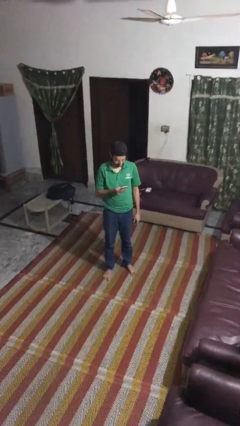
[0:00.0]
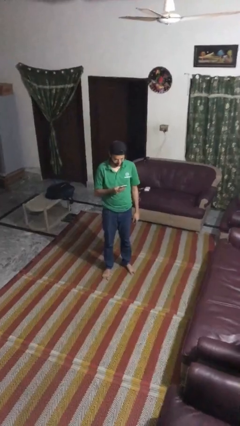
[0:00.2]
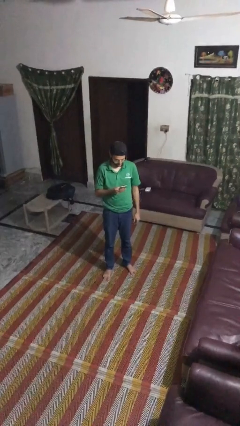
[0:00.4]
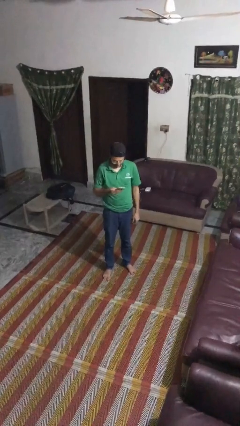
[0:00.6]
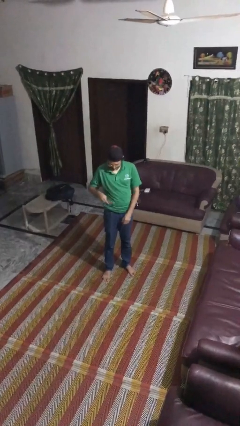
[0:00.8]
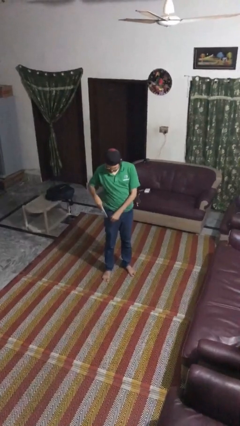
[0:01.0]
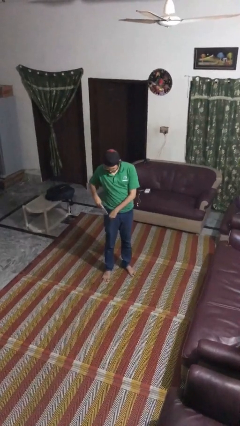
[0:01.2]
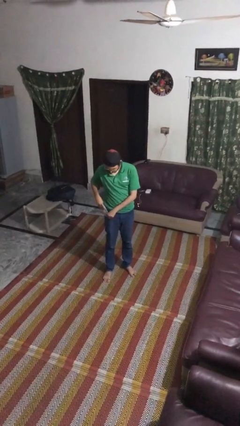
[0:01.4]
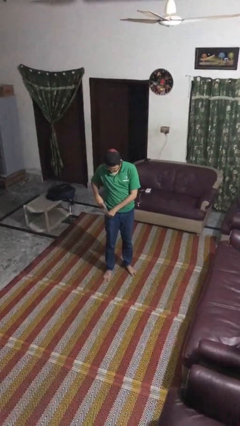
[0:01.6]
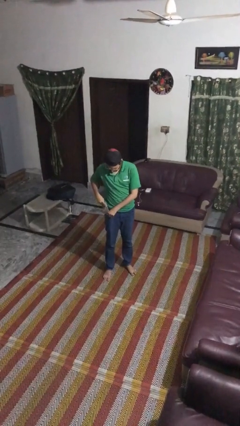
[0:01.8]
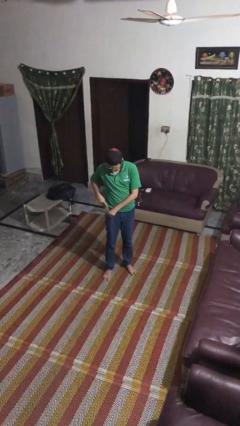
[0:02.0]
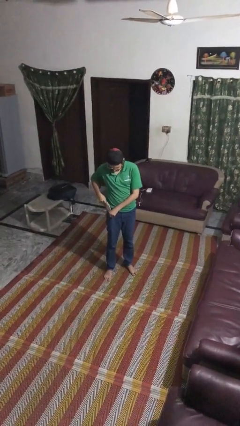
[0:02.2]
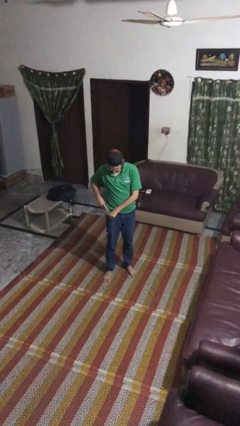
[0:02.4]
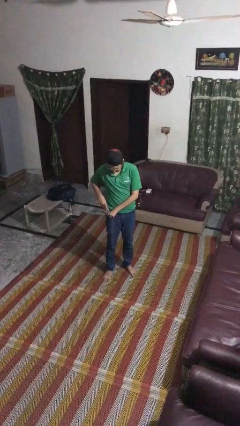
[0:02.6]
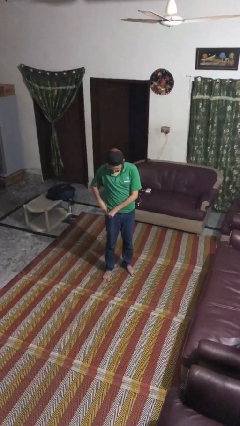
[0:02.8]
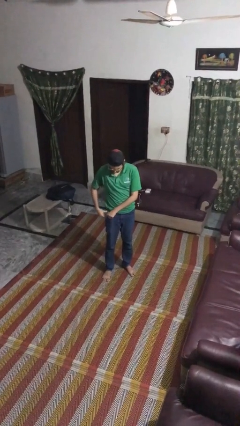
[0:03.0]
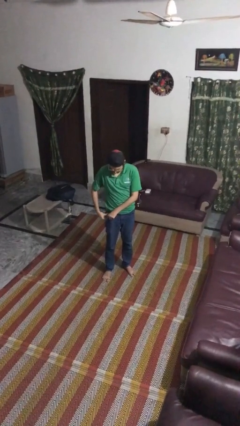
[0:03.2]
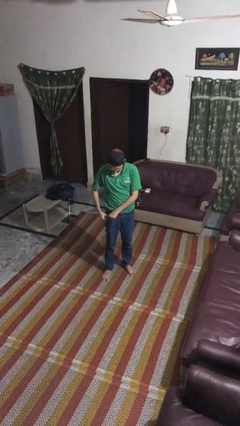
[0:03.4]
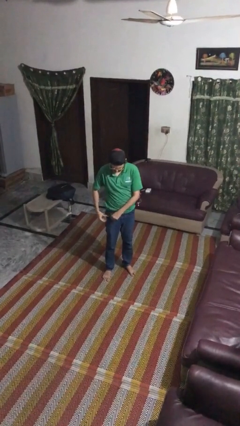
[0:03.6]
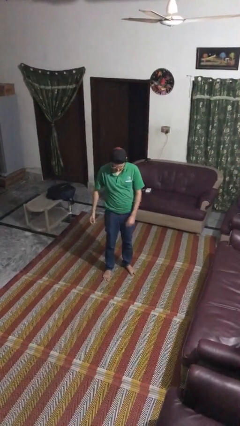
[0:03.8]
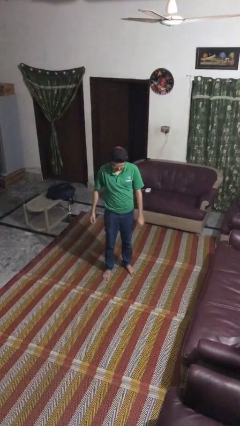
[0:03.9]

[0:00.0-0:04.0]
person puts phone into pocket

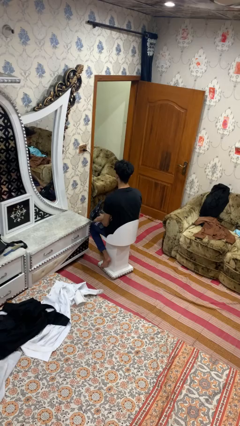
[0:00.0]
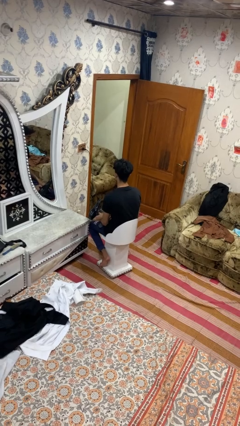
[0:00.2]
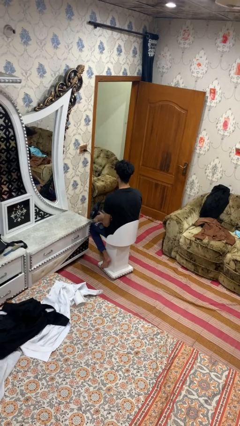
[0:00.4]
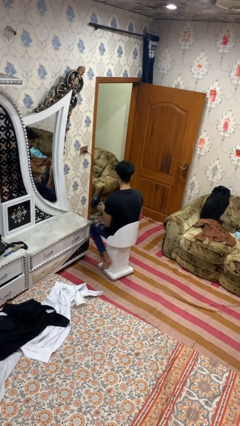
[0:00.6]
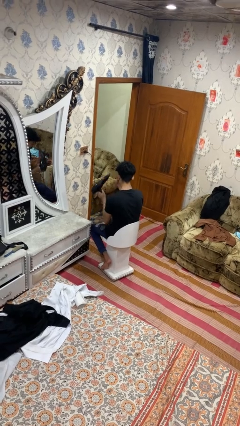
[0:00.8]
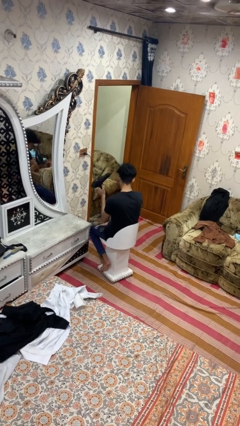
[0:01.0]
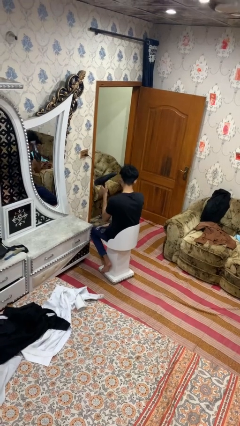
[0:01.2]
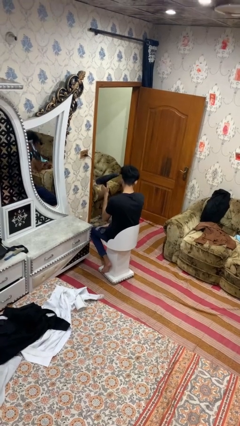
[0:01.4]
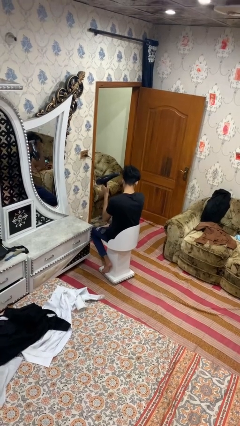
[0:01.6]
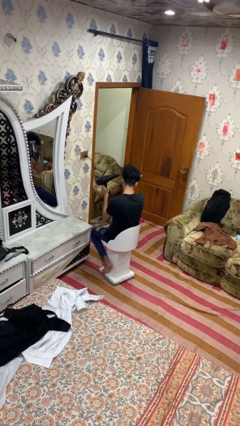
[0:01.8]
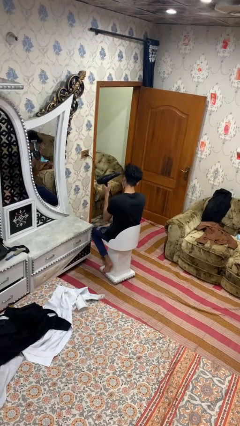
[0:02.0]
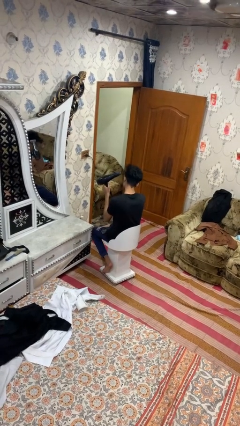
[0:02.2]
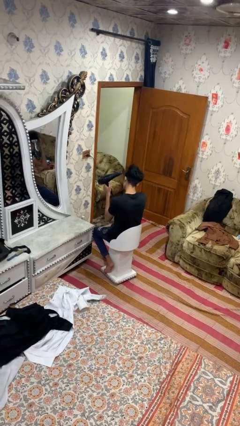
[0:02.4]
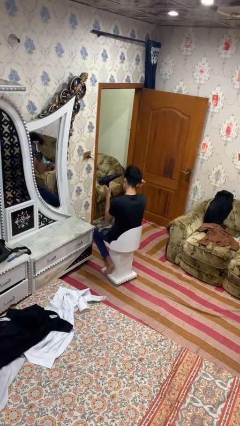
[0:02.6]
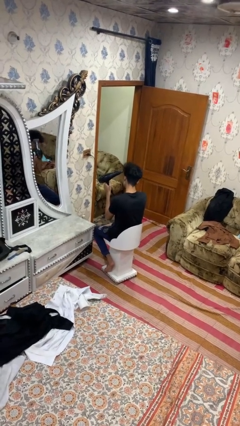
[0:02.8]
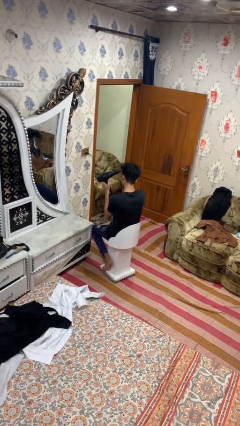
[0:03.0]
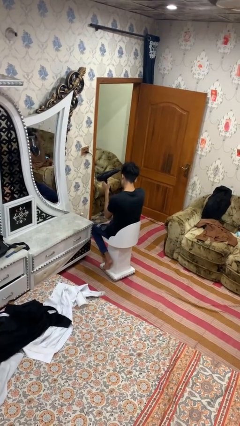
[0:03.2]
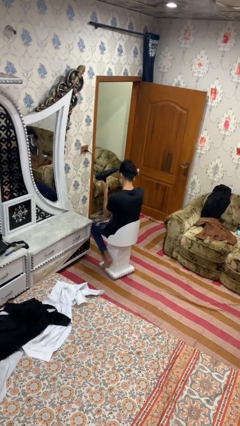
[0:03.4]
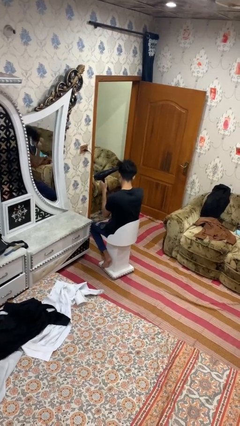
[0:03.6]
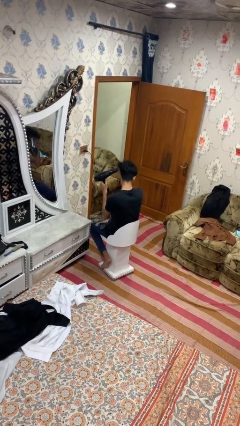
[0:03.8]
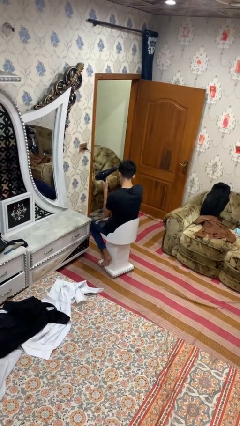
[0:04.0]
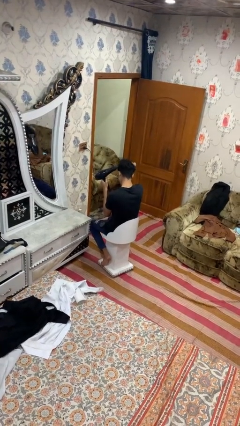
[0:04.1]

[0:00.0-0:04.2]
person dries hair with hairdryer

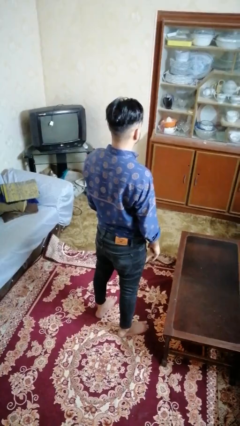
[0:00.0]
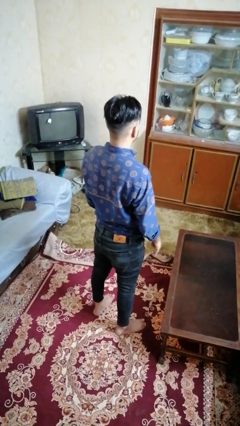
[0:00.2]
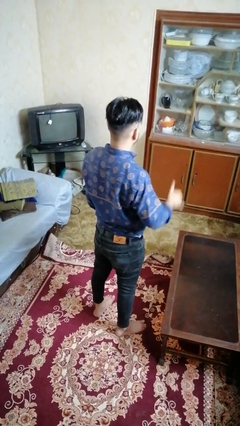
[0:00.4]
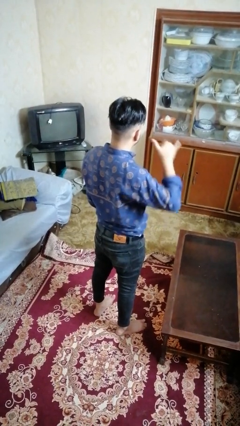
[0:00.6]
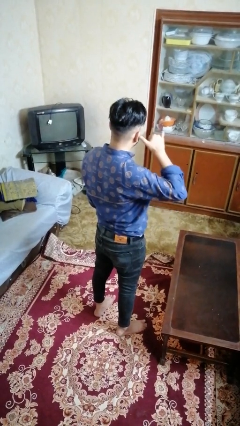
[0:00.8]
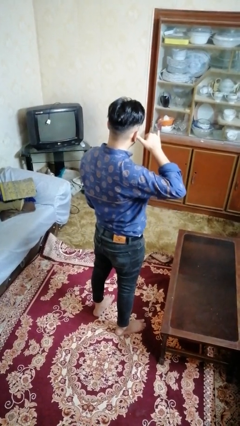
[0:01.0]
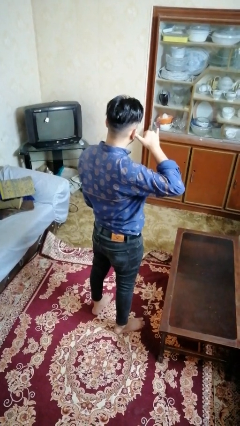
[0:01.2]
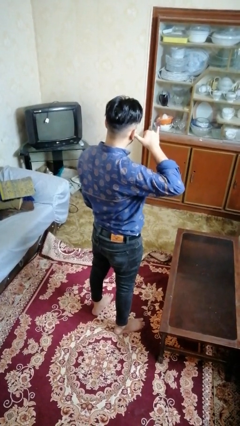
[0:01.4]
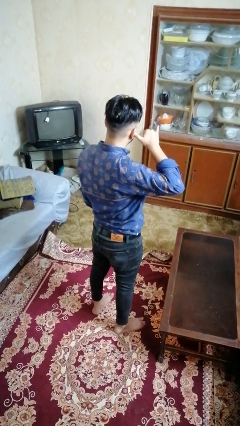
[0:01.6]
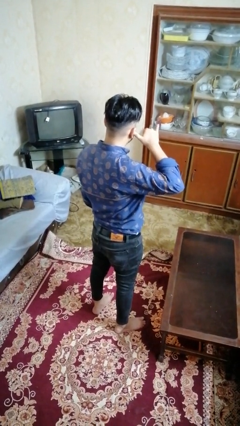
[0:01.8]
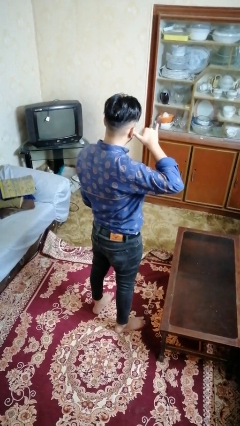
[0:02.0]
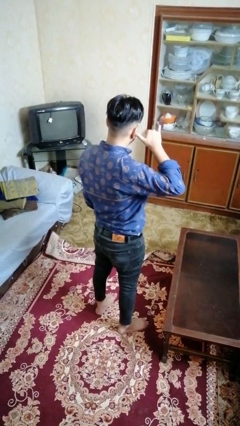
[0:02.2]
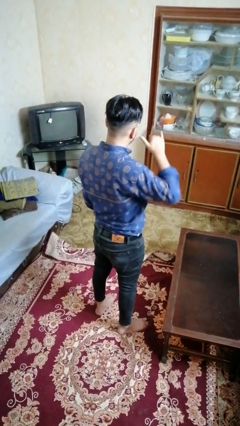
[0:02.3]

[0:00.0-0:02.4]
person gestures call me

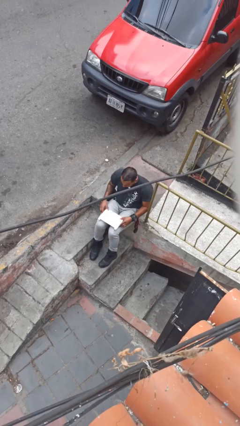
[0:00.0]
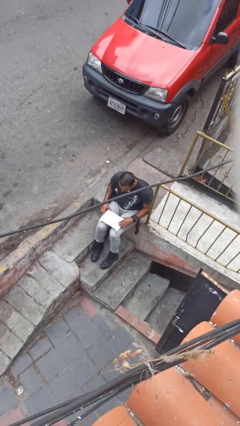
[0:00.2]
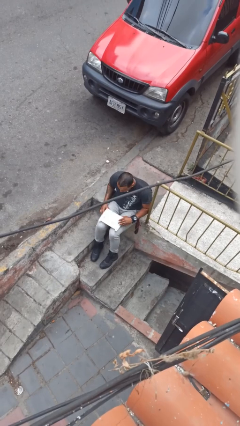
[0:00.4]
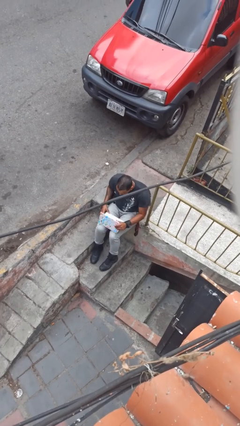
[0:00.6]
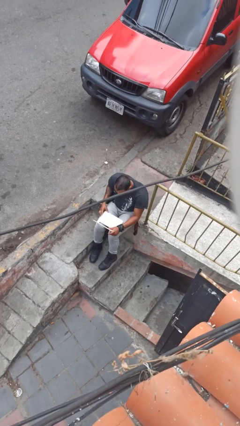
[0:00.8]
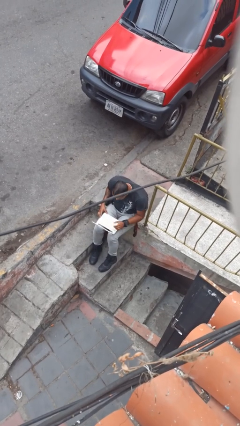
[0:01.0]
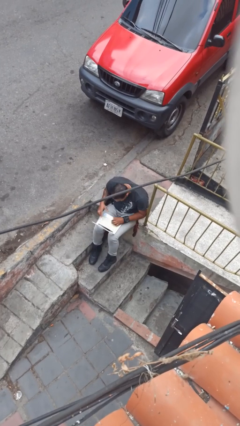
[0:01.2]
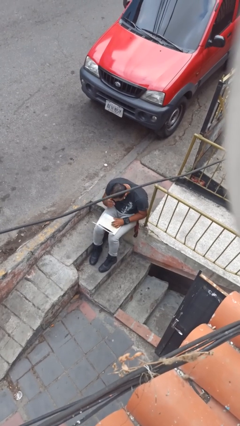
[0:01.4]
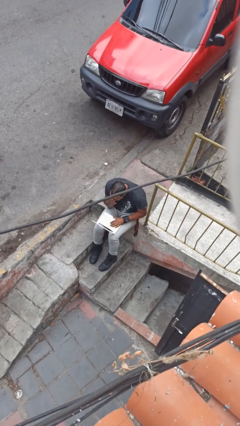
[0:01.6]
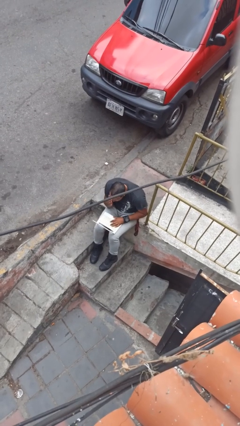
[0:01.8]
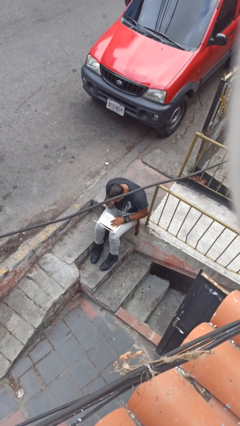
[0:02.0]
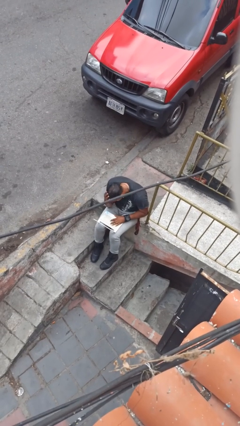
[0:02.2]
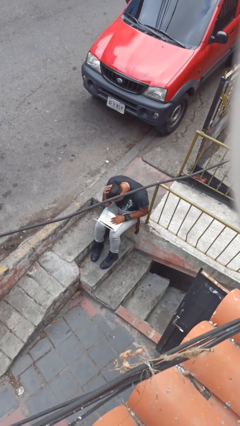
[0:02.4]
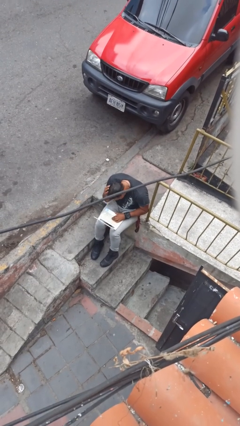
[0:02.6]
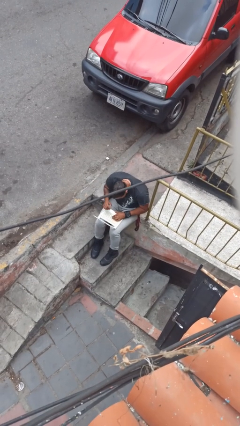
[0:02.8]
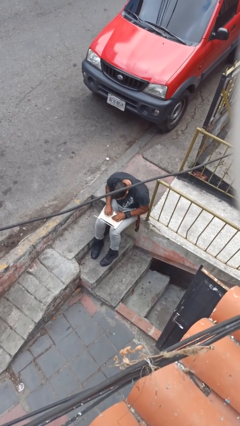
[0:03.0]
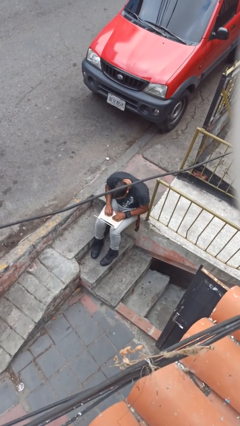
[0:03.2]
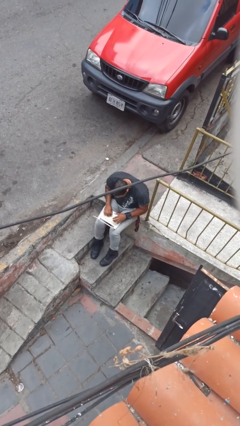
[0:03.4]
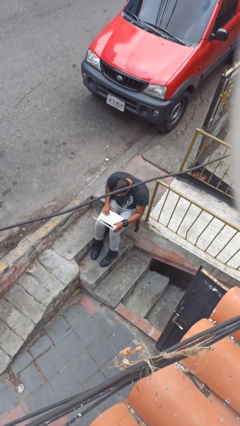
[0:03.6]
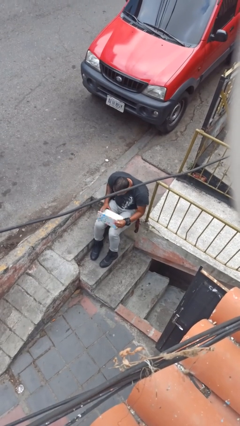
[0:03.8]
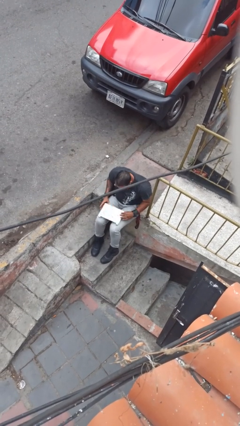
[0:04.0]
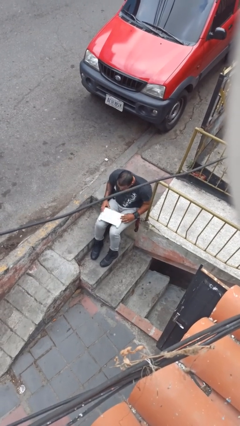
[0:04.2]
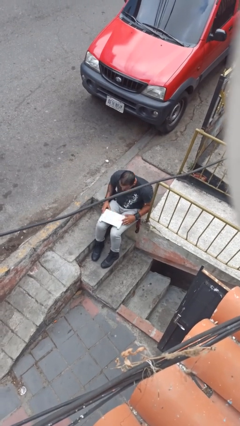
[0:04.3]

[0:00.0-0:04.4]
person interacts with laptop

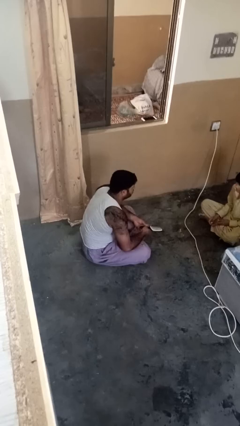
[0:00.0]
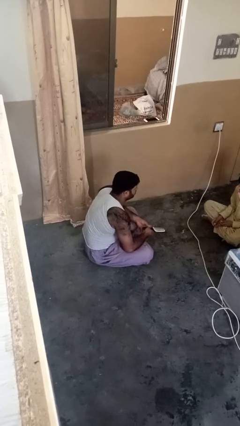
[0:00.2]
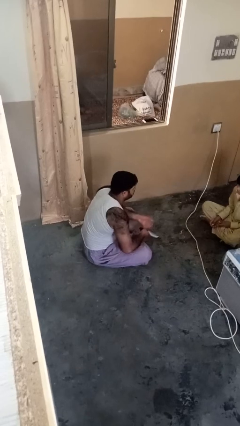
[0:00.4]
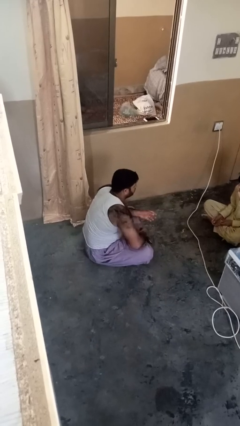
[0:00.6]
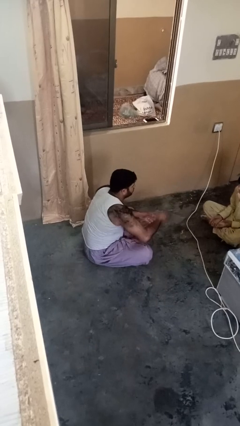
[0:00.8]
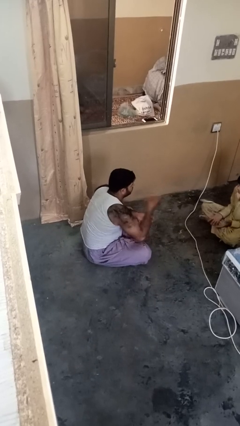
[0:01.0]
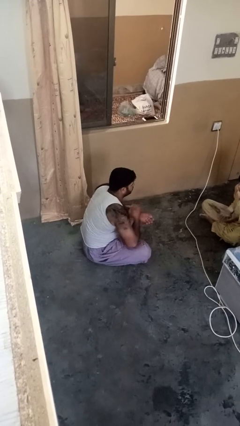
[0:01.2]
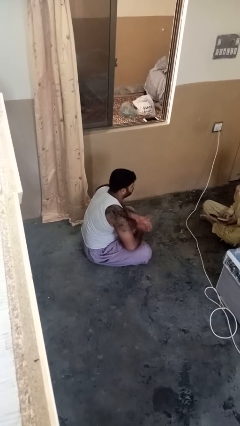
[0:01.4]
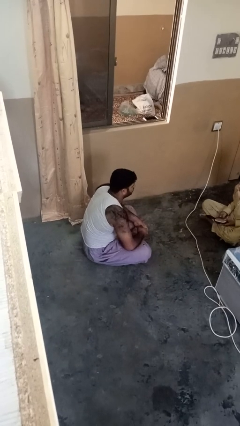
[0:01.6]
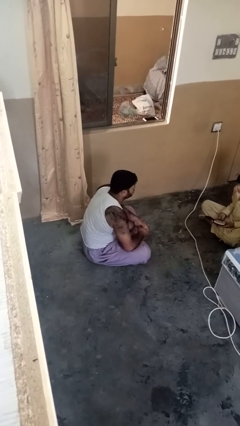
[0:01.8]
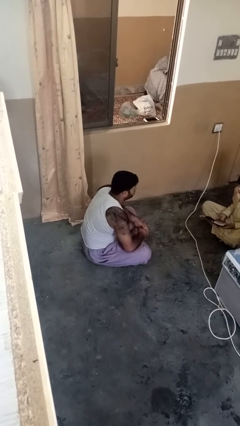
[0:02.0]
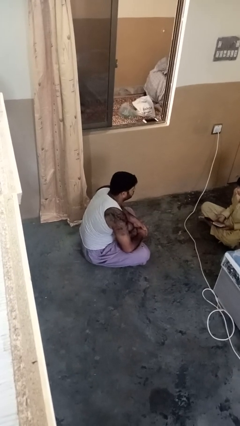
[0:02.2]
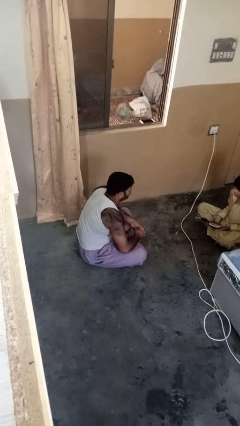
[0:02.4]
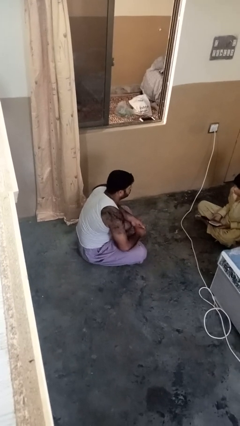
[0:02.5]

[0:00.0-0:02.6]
person throws object to person

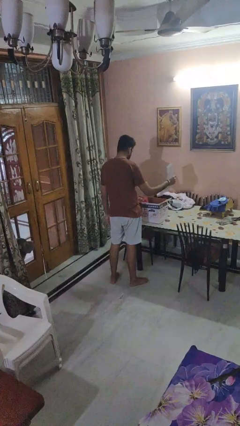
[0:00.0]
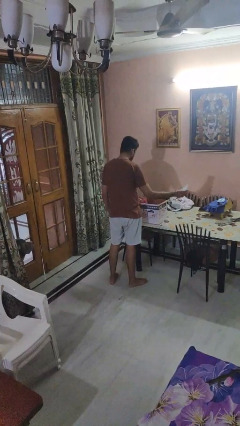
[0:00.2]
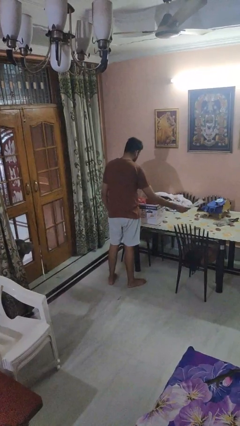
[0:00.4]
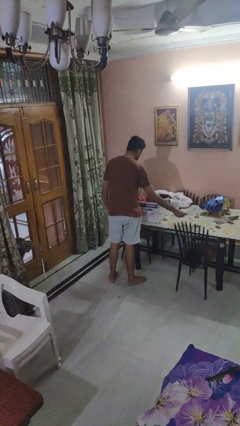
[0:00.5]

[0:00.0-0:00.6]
person takes object from box
